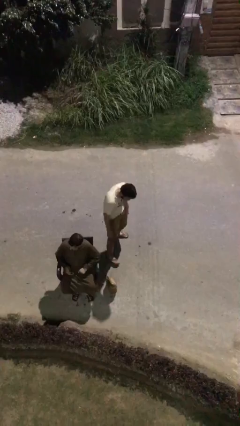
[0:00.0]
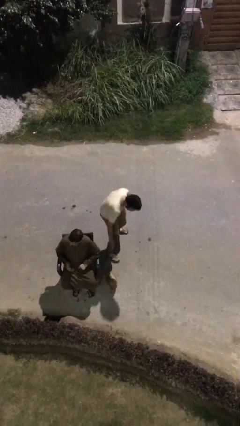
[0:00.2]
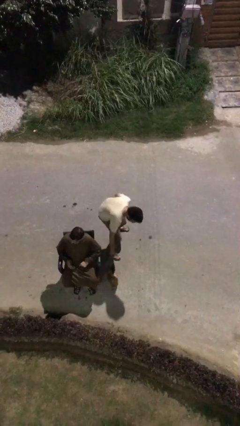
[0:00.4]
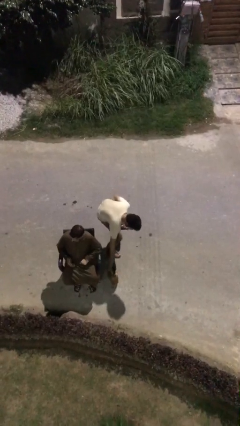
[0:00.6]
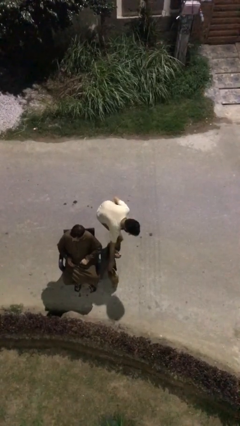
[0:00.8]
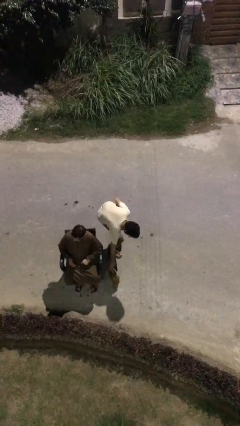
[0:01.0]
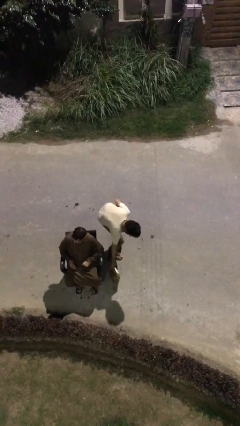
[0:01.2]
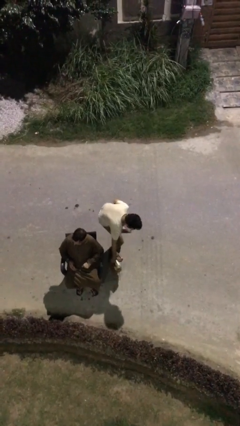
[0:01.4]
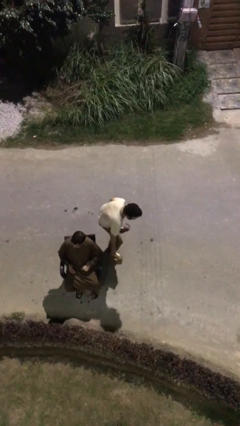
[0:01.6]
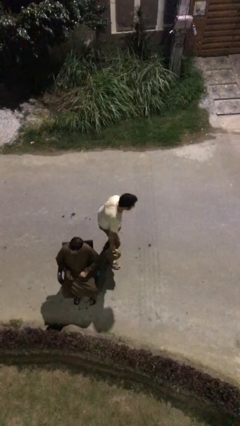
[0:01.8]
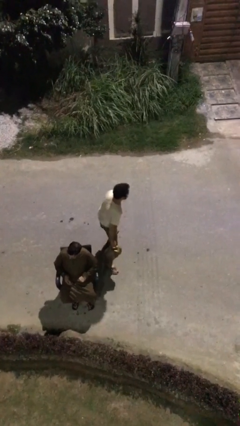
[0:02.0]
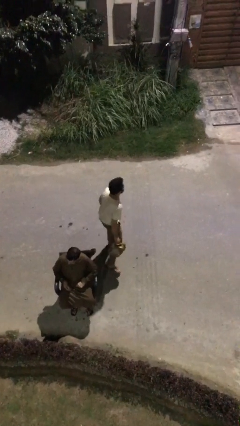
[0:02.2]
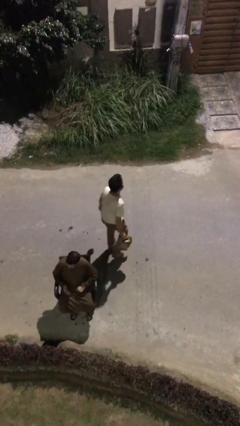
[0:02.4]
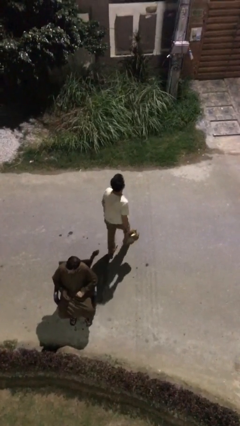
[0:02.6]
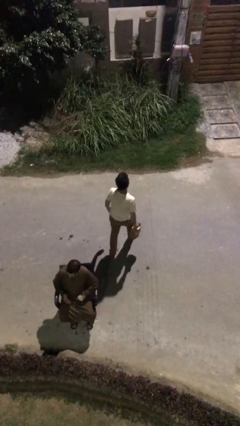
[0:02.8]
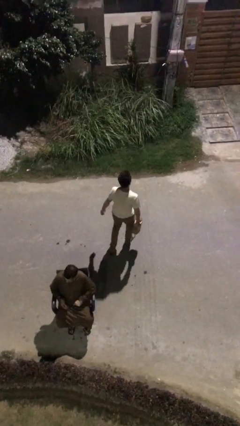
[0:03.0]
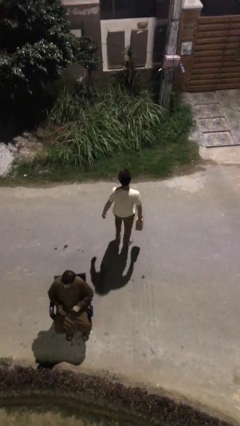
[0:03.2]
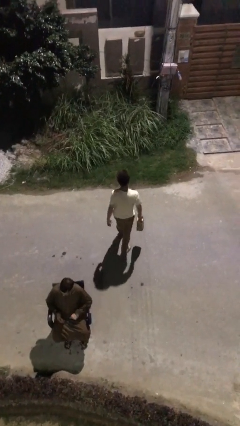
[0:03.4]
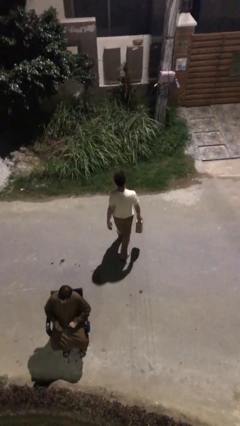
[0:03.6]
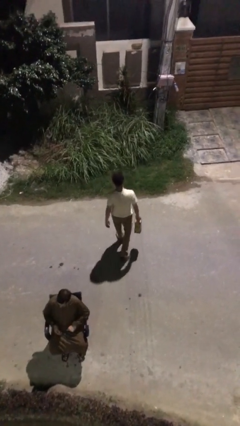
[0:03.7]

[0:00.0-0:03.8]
person steals object from person

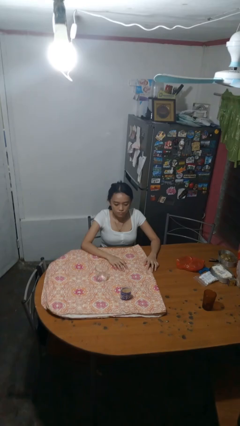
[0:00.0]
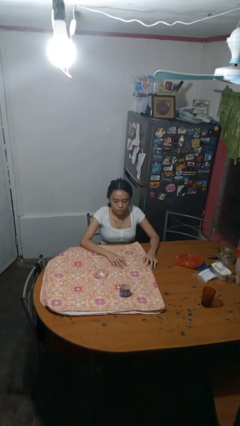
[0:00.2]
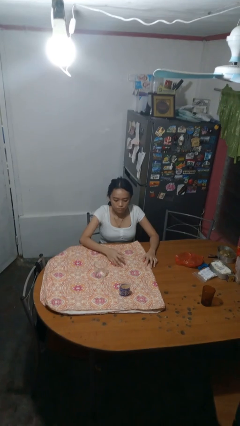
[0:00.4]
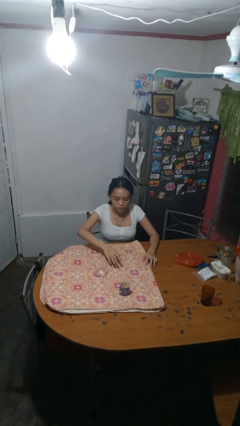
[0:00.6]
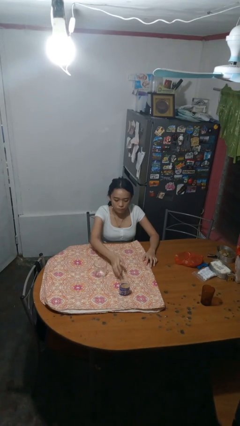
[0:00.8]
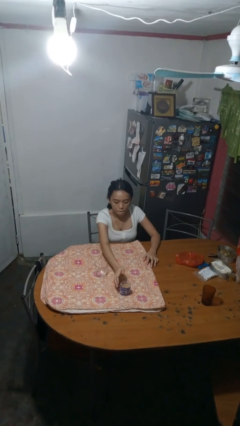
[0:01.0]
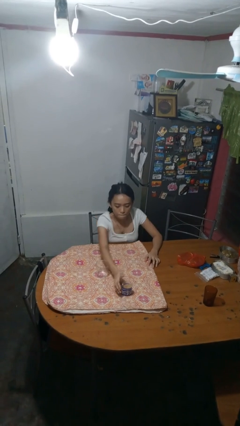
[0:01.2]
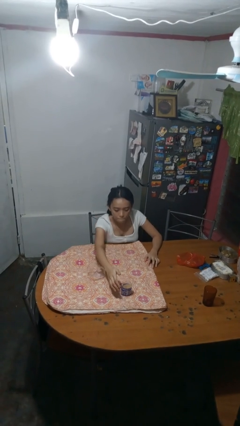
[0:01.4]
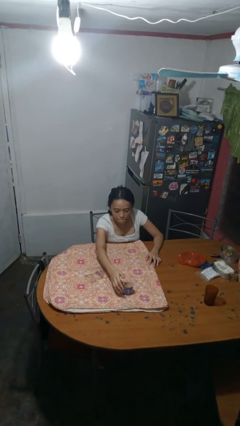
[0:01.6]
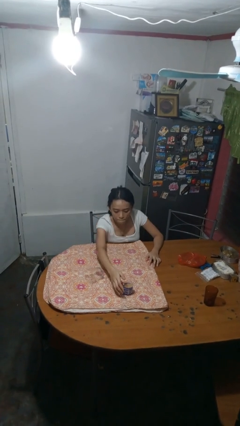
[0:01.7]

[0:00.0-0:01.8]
person knocks over glass

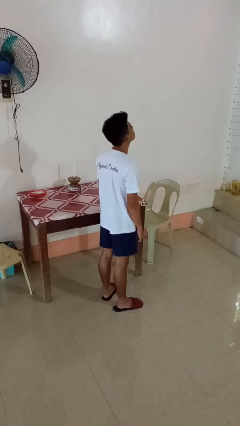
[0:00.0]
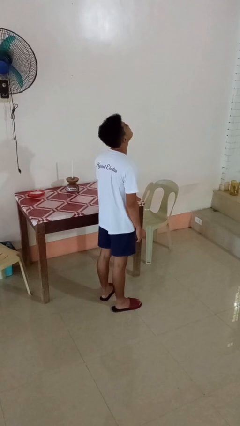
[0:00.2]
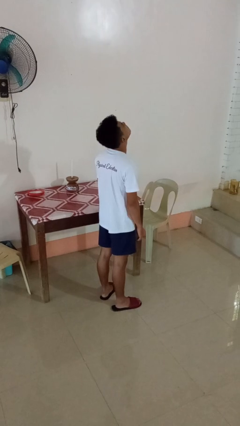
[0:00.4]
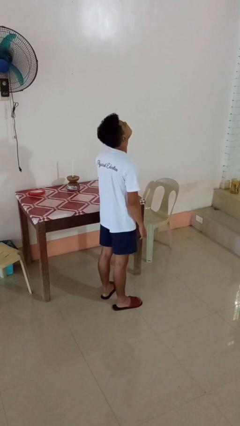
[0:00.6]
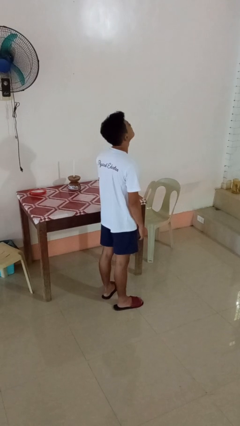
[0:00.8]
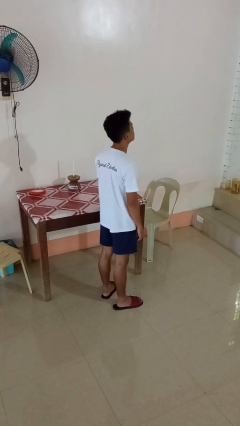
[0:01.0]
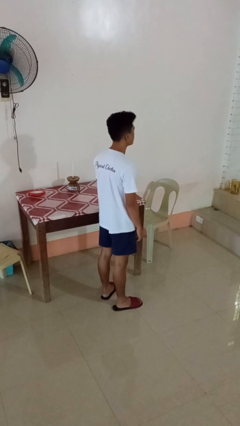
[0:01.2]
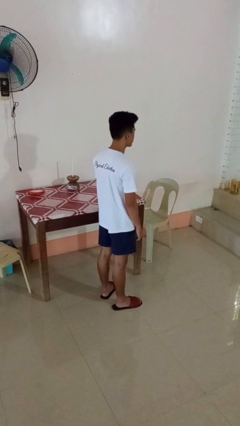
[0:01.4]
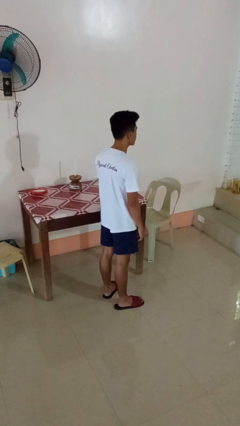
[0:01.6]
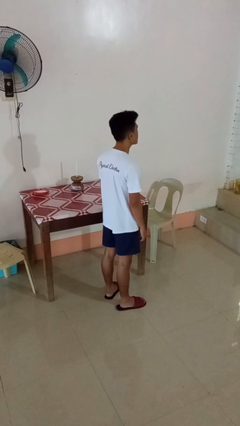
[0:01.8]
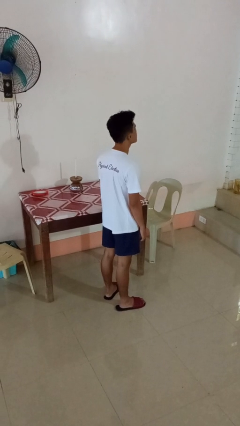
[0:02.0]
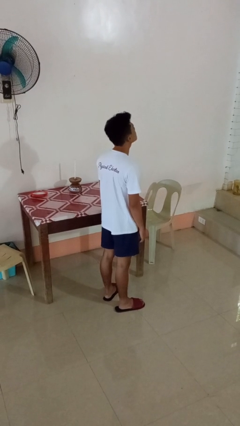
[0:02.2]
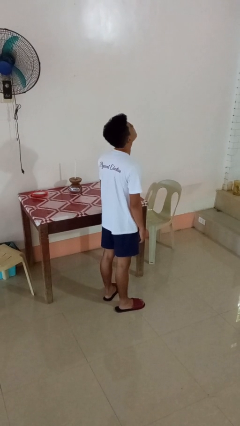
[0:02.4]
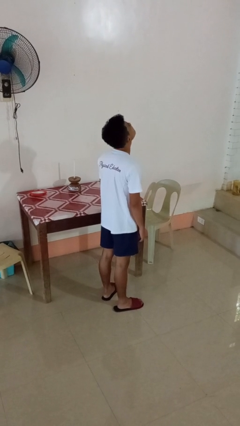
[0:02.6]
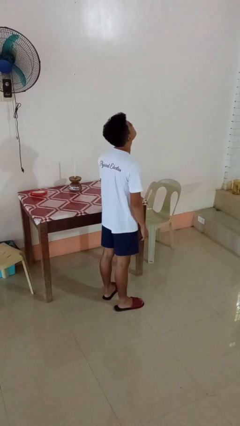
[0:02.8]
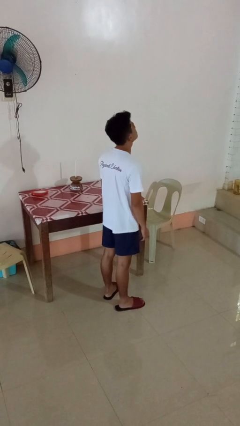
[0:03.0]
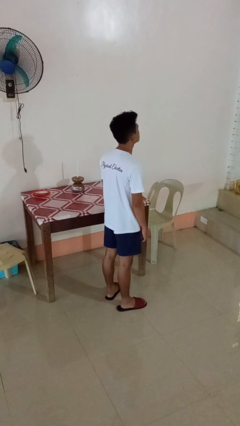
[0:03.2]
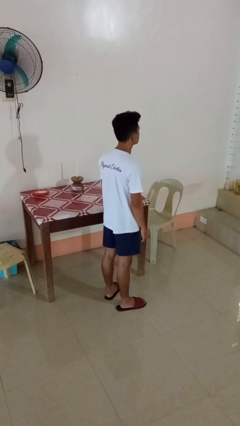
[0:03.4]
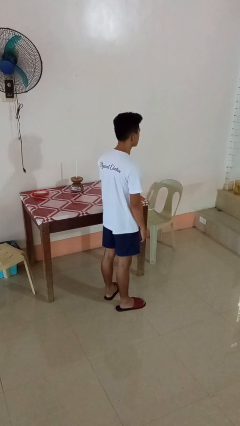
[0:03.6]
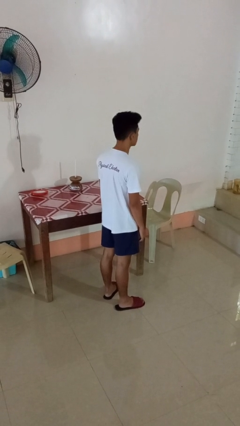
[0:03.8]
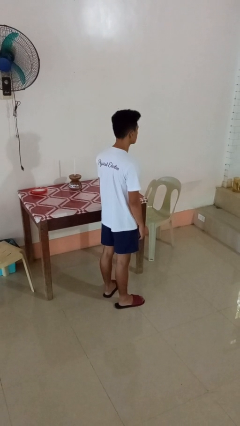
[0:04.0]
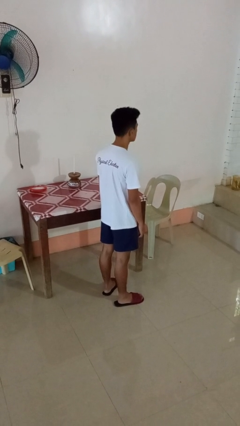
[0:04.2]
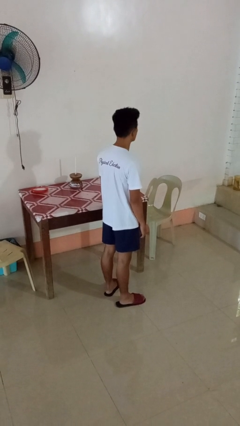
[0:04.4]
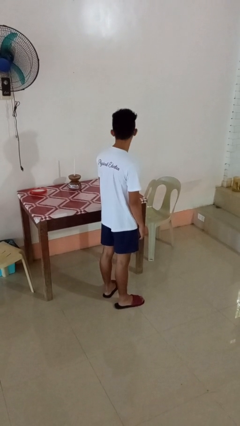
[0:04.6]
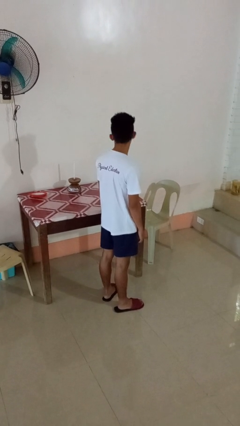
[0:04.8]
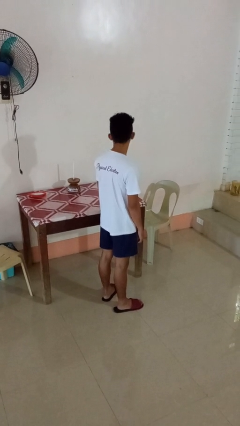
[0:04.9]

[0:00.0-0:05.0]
person nods head

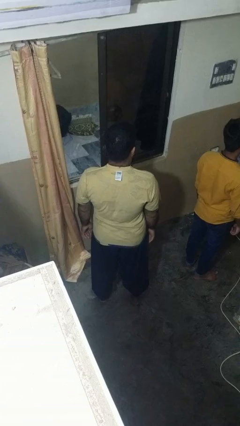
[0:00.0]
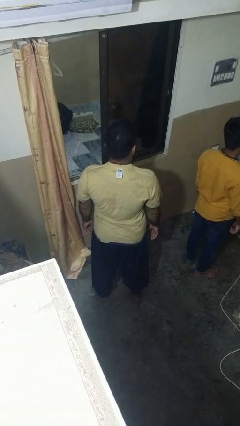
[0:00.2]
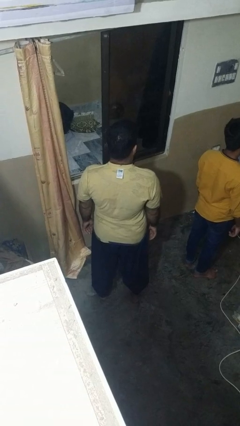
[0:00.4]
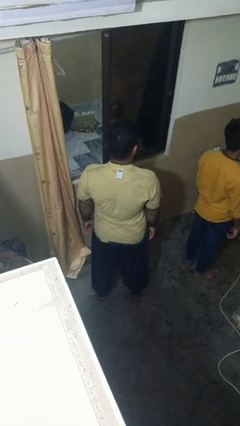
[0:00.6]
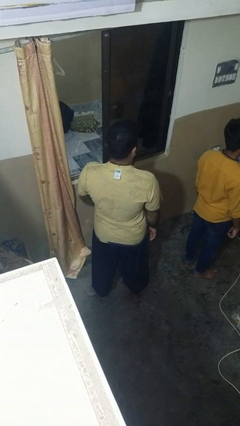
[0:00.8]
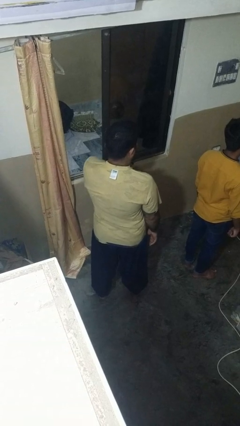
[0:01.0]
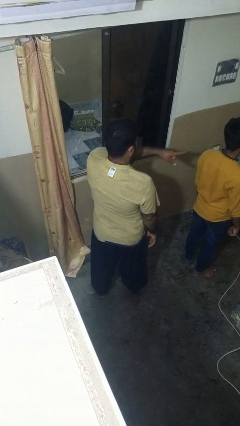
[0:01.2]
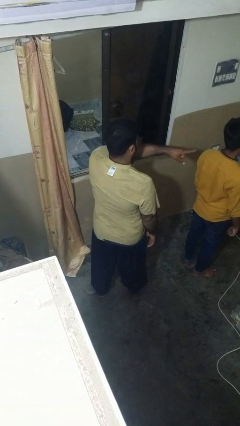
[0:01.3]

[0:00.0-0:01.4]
person points at person

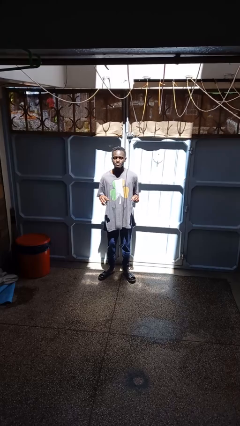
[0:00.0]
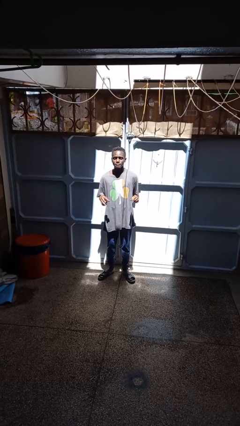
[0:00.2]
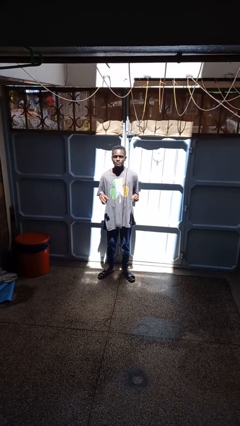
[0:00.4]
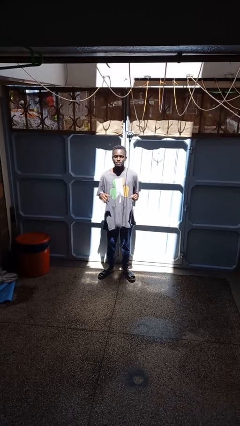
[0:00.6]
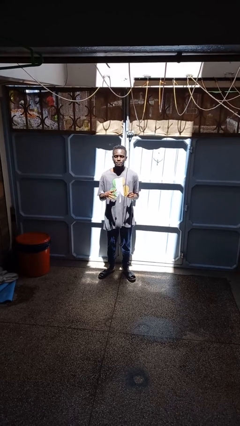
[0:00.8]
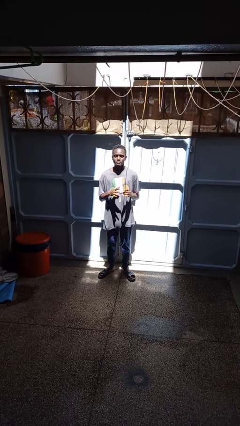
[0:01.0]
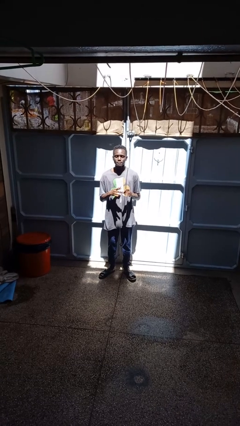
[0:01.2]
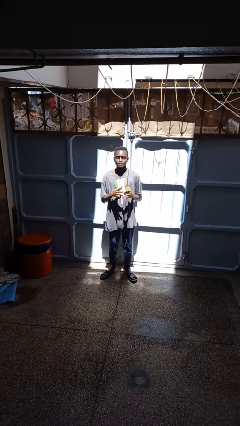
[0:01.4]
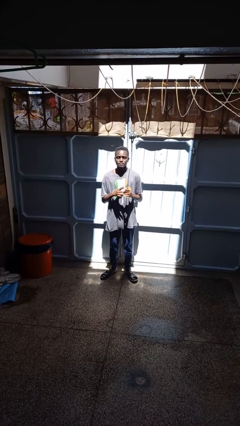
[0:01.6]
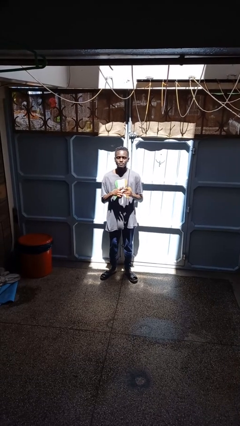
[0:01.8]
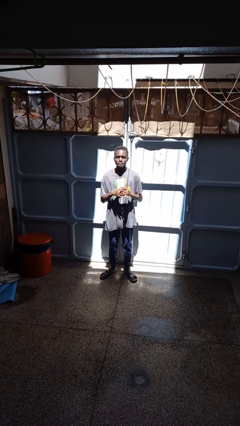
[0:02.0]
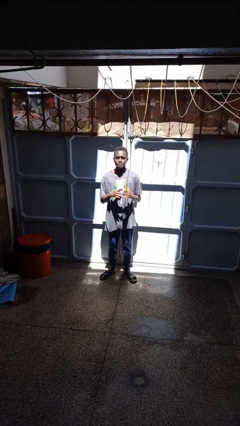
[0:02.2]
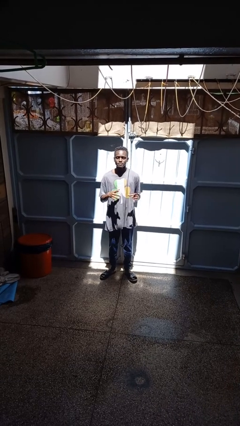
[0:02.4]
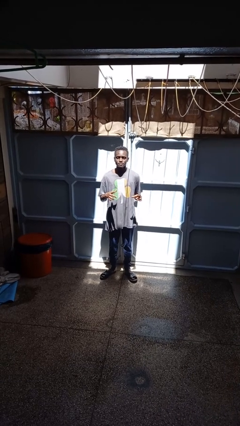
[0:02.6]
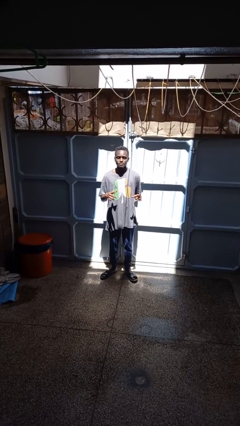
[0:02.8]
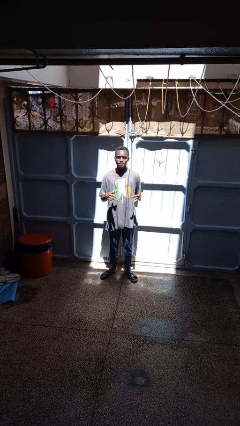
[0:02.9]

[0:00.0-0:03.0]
person puts on ring

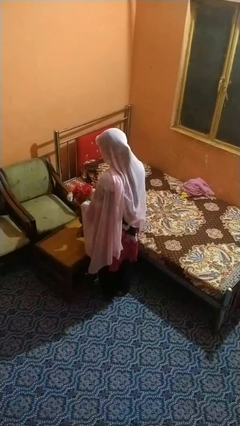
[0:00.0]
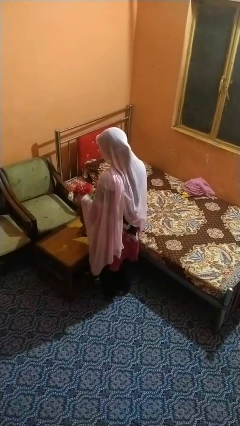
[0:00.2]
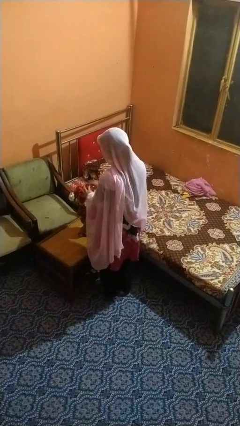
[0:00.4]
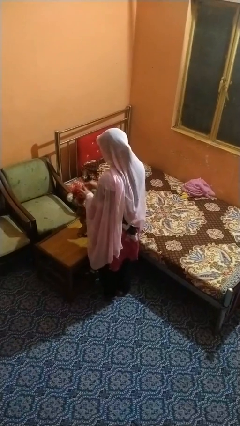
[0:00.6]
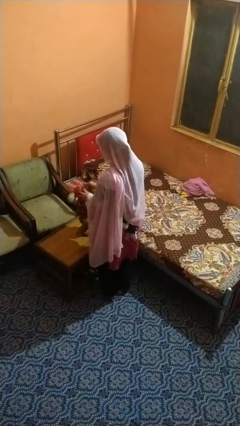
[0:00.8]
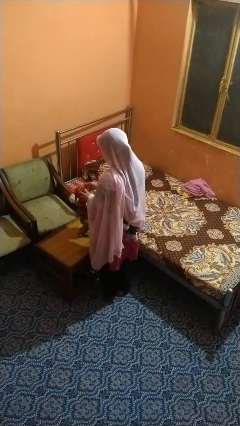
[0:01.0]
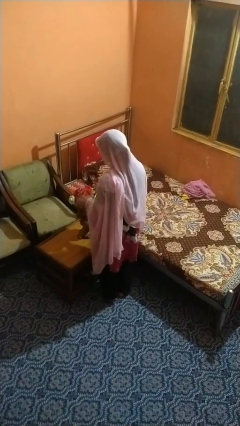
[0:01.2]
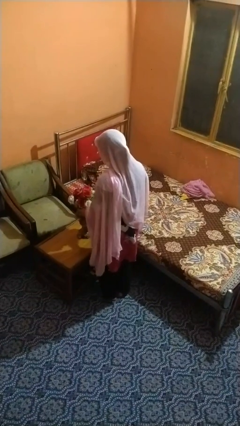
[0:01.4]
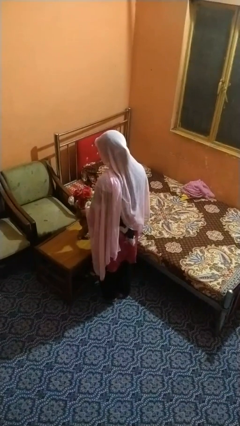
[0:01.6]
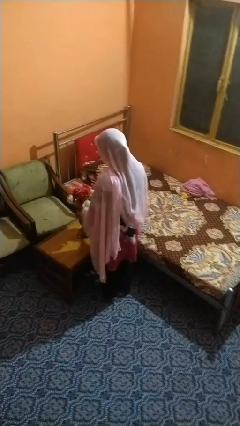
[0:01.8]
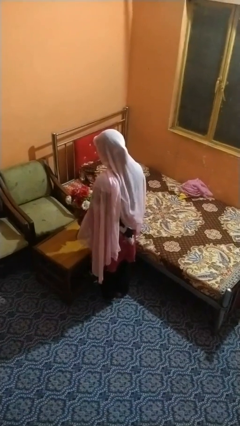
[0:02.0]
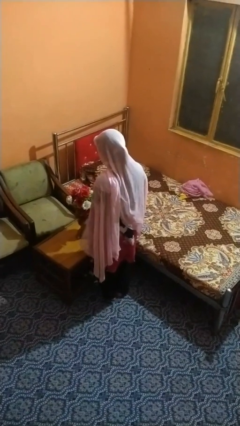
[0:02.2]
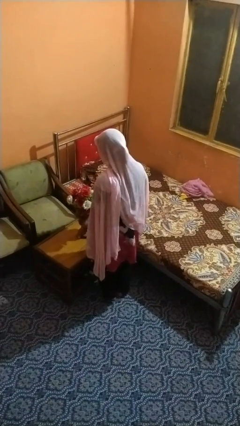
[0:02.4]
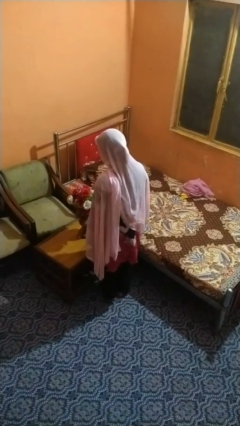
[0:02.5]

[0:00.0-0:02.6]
person arranges flowers in vase
